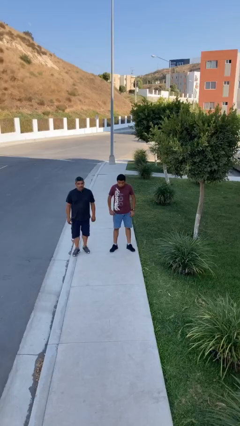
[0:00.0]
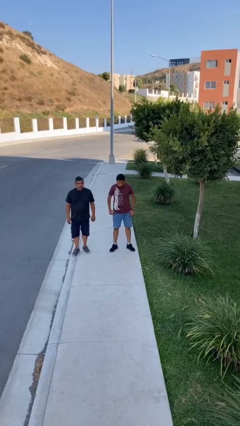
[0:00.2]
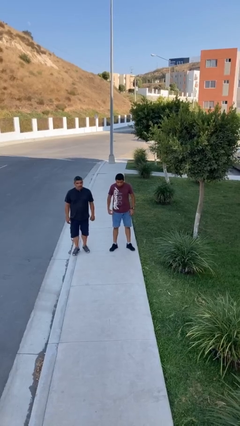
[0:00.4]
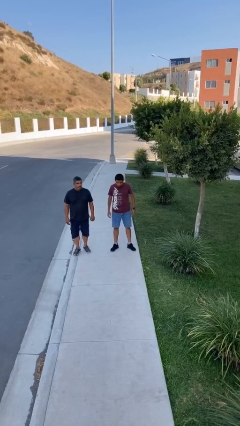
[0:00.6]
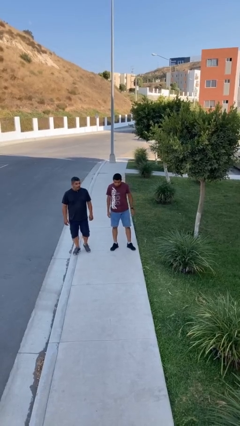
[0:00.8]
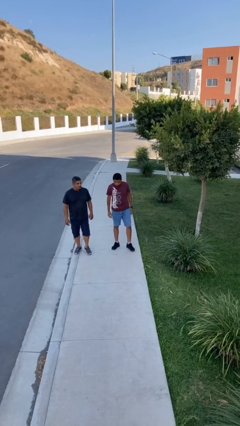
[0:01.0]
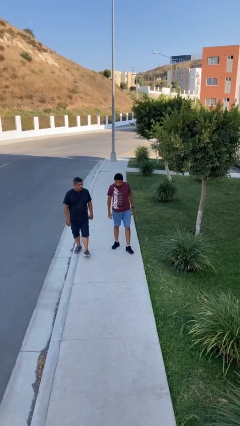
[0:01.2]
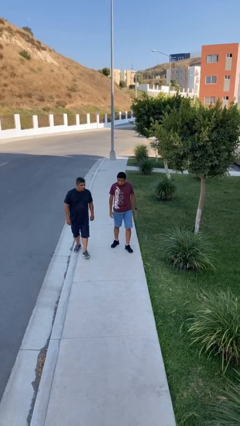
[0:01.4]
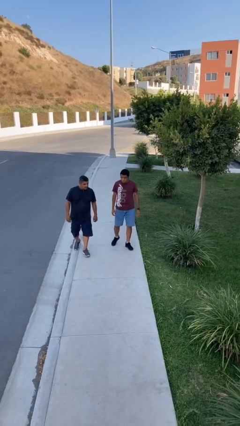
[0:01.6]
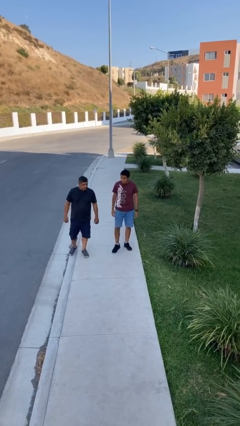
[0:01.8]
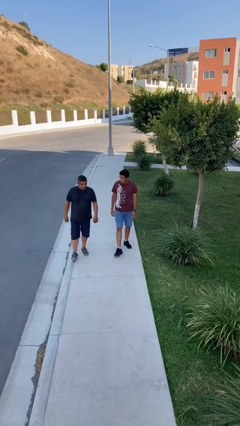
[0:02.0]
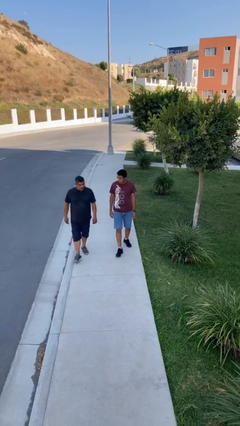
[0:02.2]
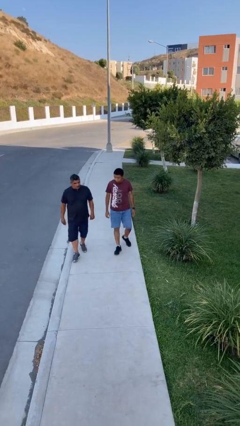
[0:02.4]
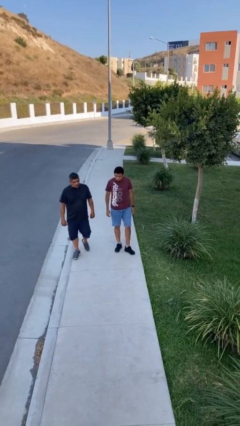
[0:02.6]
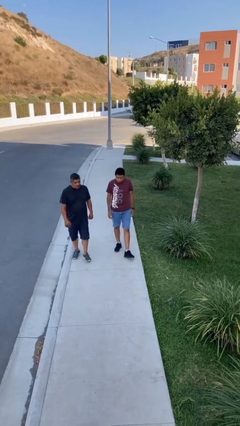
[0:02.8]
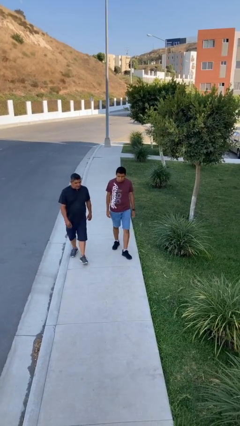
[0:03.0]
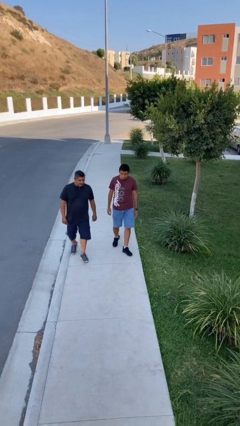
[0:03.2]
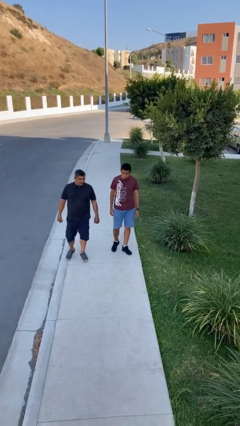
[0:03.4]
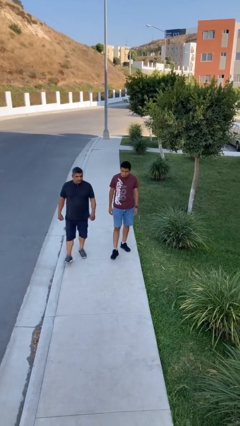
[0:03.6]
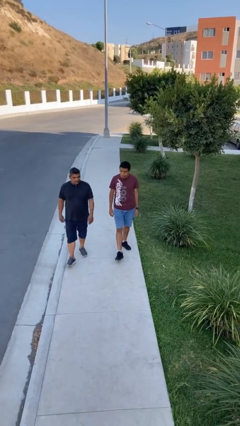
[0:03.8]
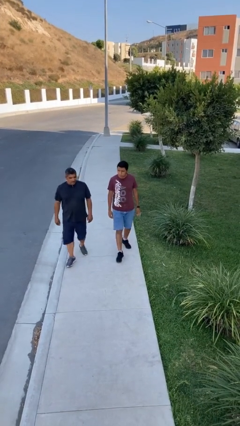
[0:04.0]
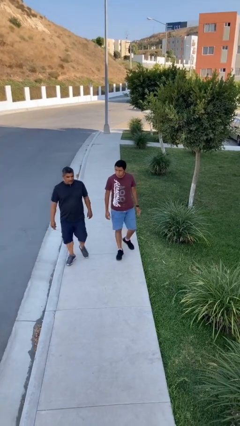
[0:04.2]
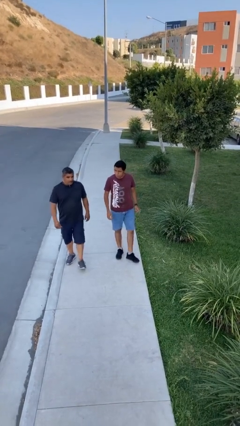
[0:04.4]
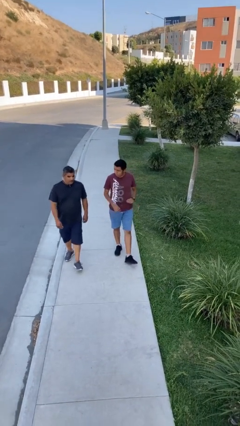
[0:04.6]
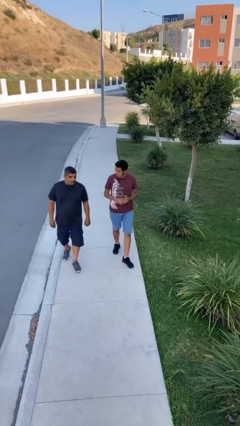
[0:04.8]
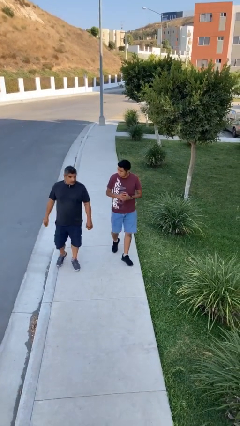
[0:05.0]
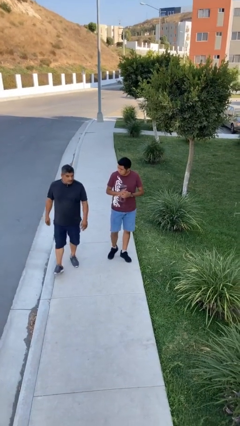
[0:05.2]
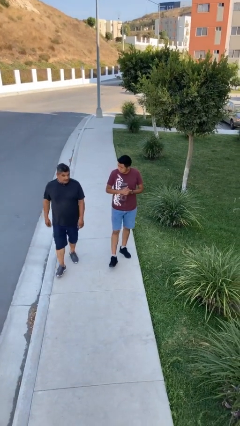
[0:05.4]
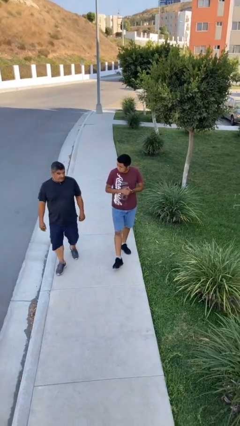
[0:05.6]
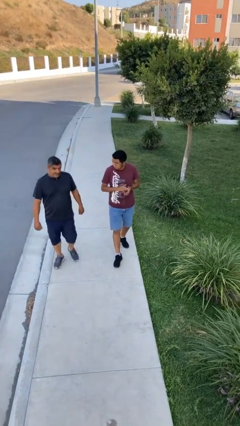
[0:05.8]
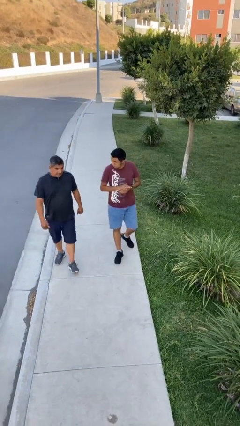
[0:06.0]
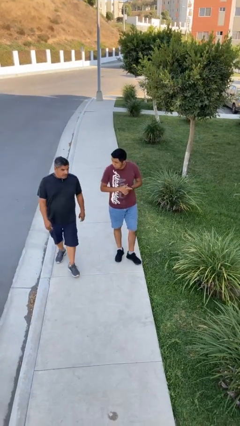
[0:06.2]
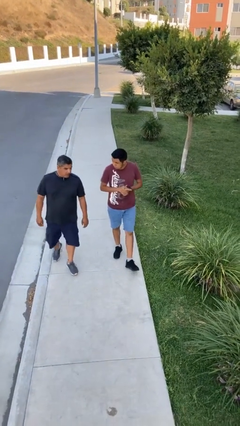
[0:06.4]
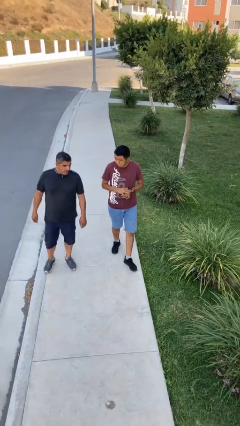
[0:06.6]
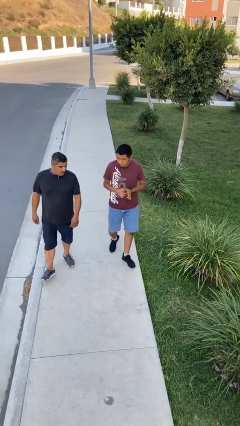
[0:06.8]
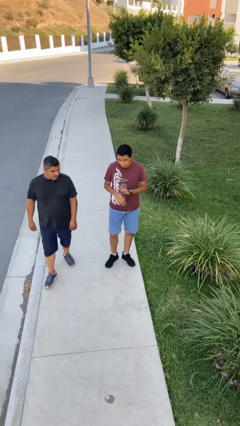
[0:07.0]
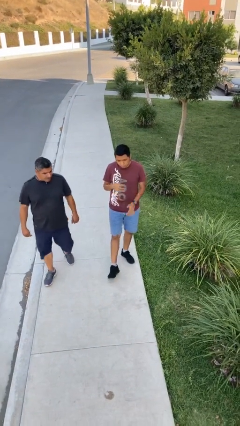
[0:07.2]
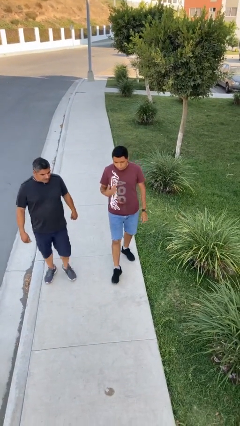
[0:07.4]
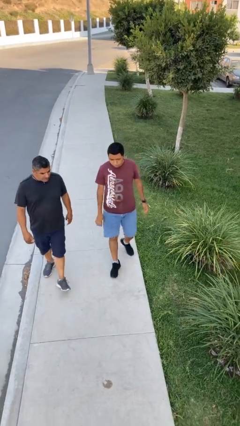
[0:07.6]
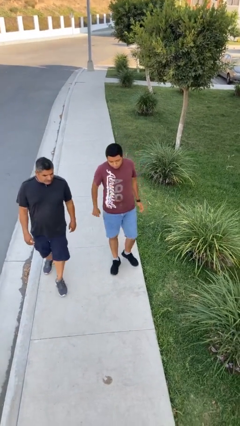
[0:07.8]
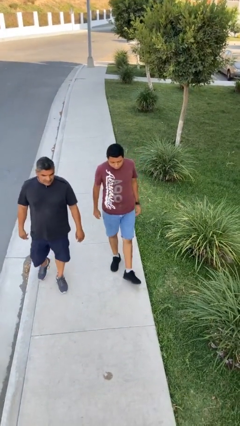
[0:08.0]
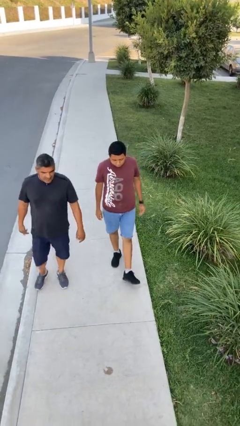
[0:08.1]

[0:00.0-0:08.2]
person talks to person

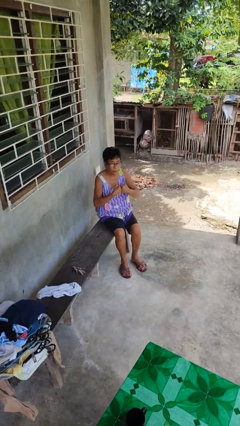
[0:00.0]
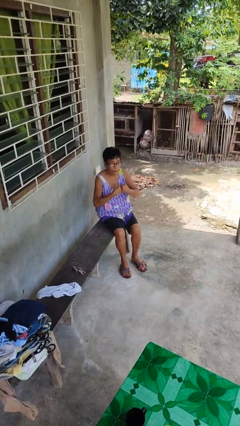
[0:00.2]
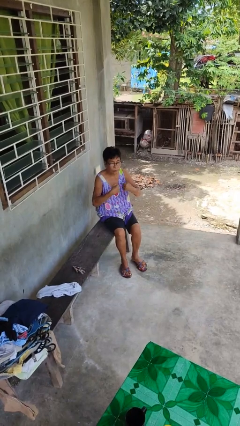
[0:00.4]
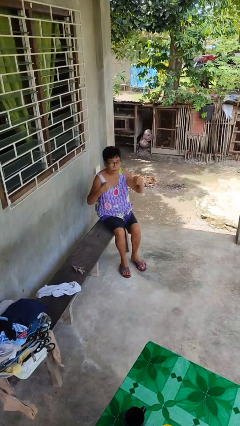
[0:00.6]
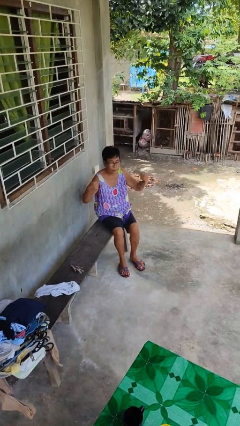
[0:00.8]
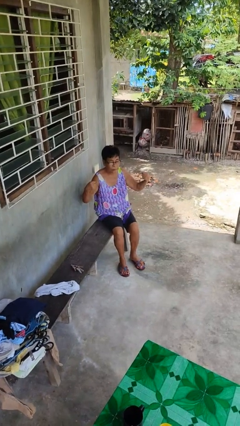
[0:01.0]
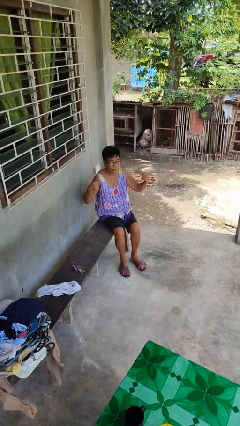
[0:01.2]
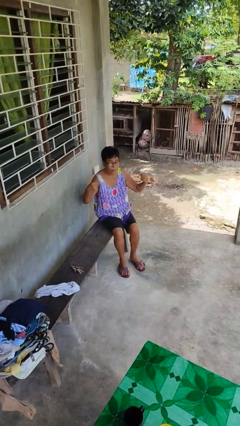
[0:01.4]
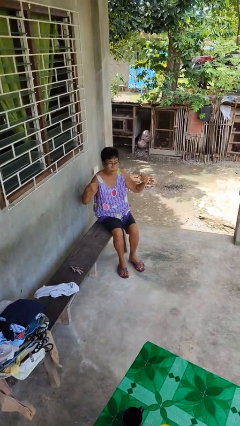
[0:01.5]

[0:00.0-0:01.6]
person gestures zoom in

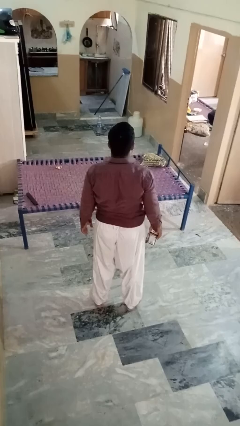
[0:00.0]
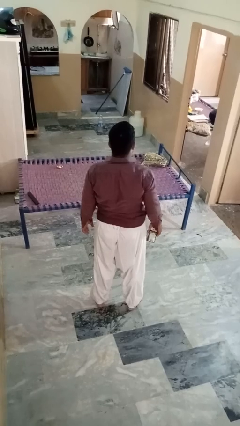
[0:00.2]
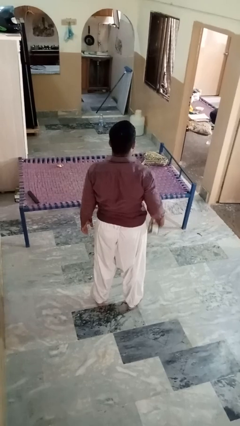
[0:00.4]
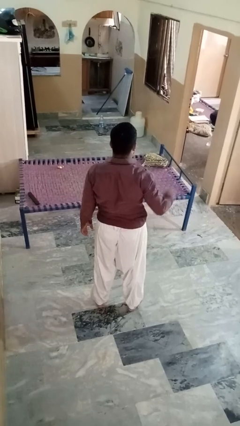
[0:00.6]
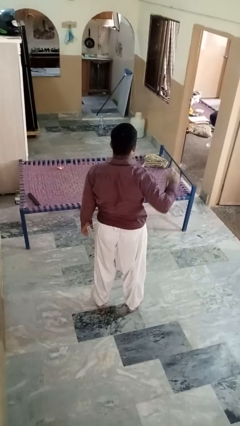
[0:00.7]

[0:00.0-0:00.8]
person drops object

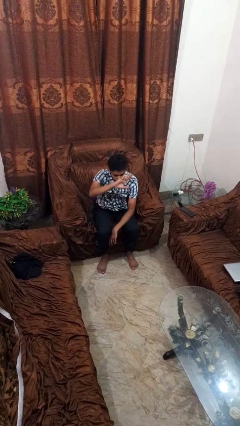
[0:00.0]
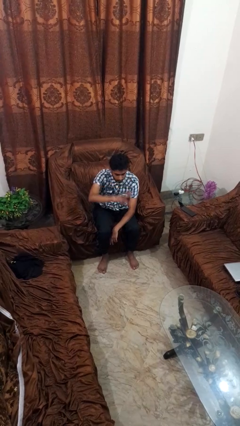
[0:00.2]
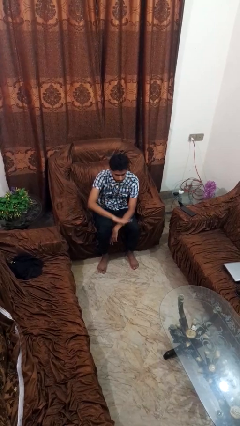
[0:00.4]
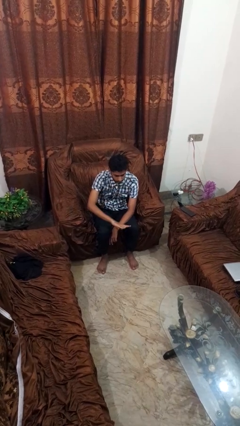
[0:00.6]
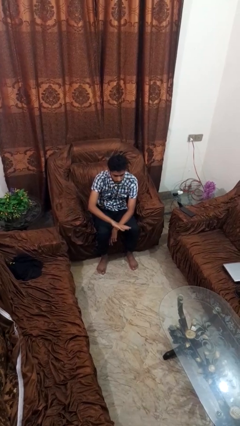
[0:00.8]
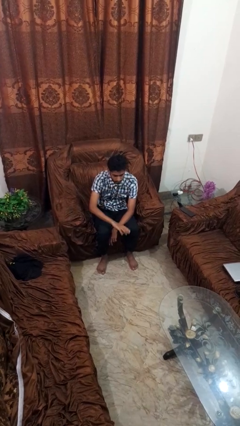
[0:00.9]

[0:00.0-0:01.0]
person gestures swipe down

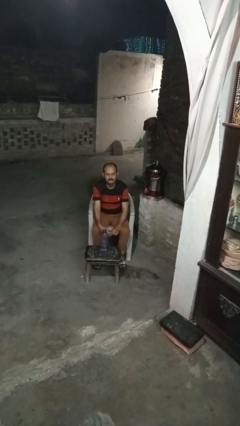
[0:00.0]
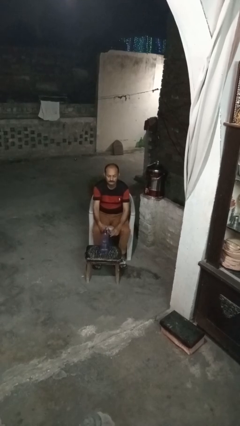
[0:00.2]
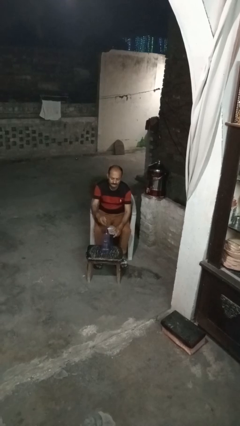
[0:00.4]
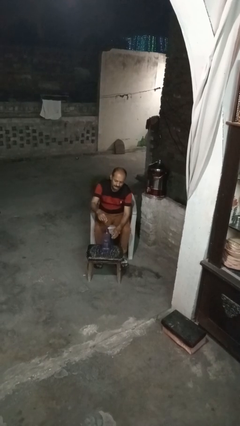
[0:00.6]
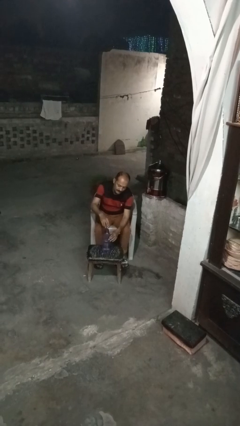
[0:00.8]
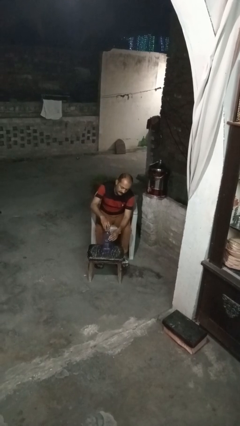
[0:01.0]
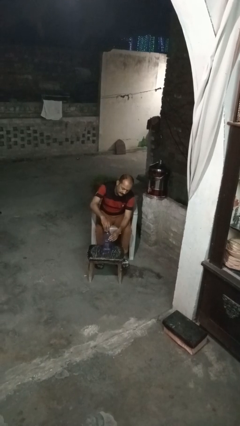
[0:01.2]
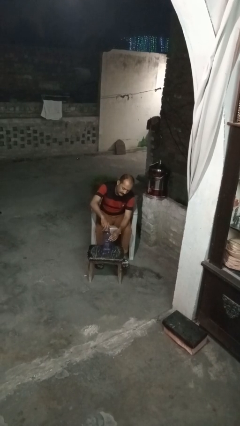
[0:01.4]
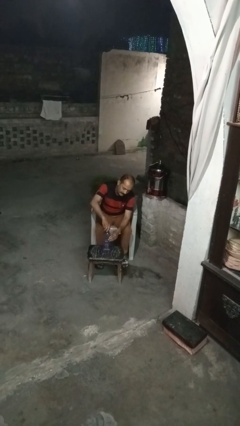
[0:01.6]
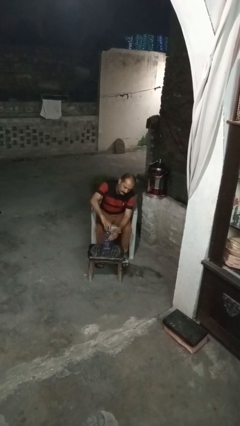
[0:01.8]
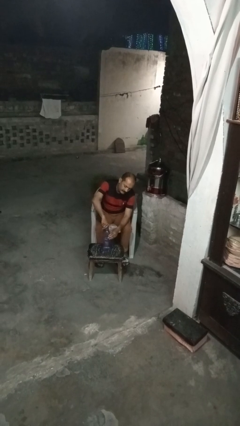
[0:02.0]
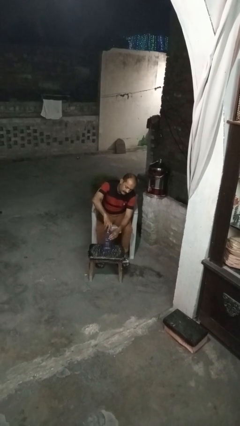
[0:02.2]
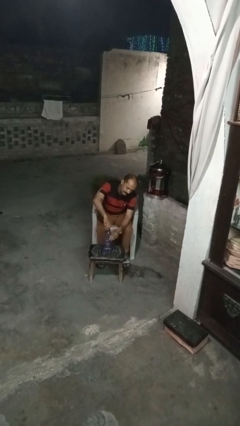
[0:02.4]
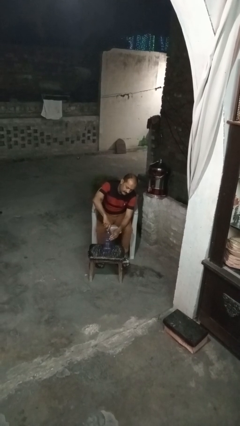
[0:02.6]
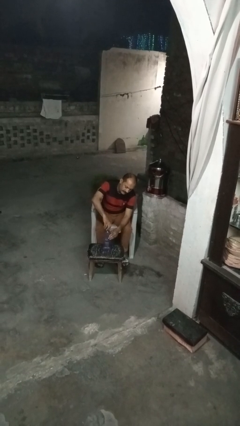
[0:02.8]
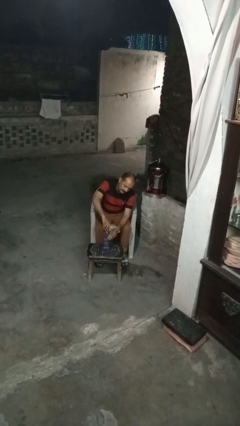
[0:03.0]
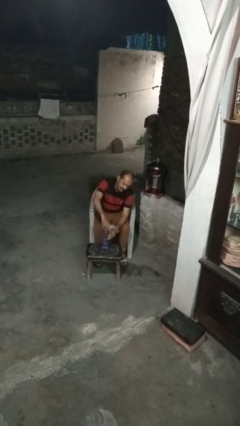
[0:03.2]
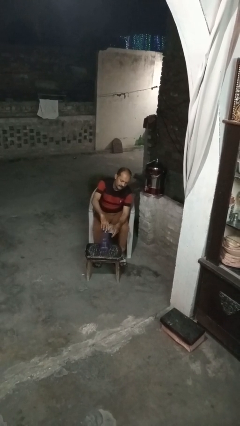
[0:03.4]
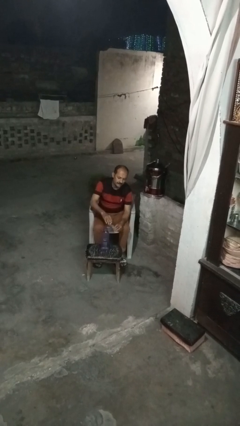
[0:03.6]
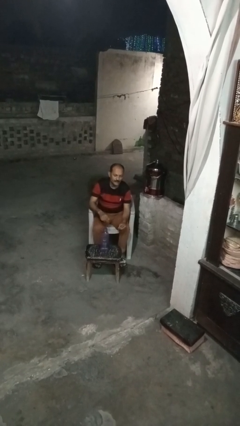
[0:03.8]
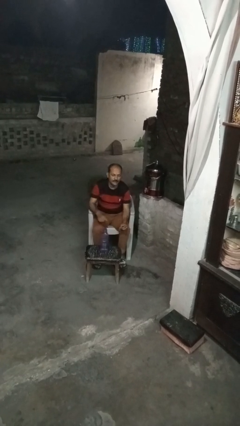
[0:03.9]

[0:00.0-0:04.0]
person screws lid to bottle

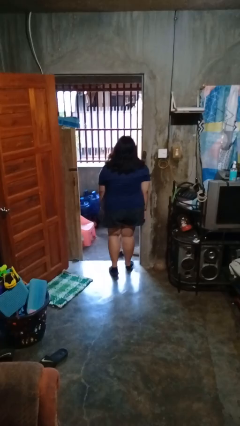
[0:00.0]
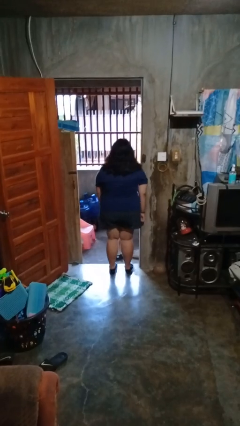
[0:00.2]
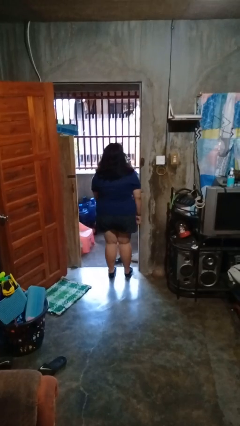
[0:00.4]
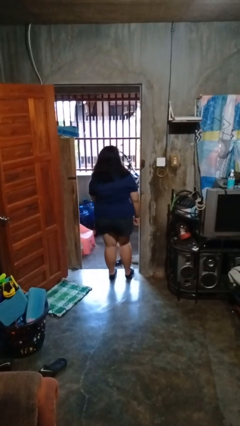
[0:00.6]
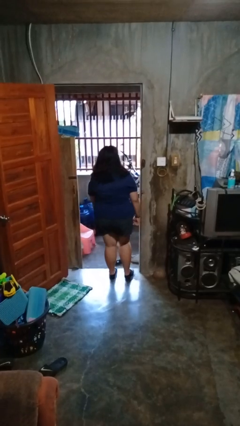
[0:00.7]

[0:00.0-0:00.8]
person bumps into wall

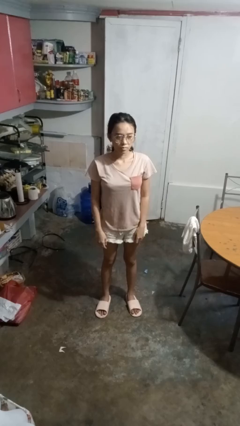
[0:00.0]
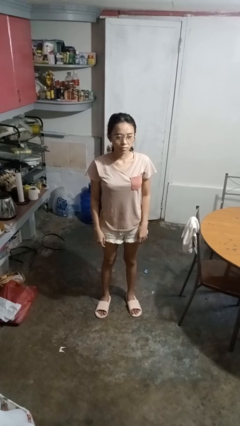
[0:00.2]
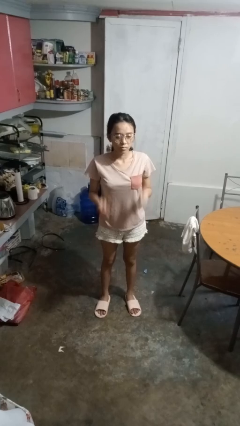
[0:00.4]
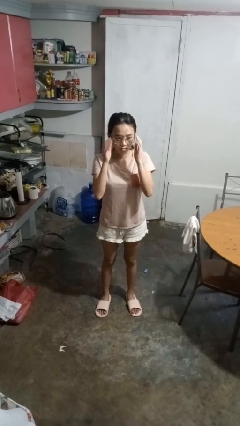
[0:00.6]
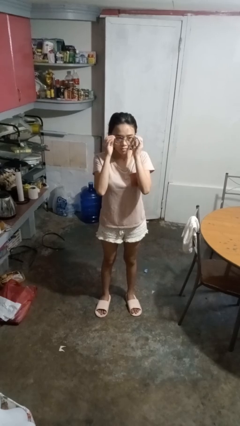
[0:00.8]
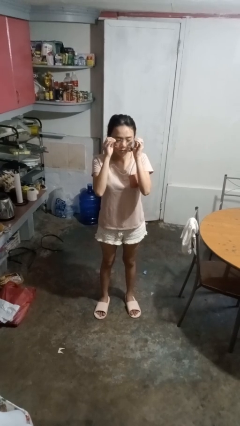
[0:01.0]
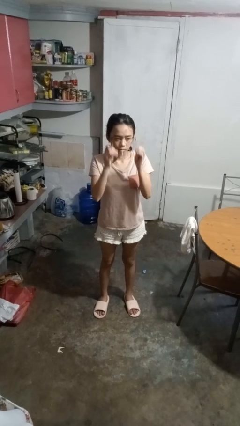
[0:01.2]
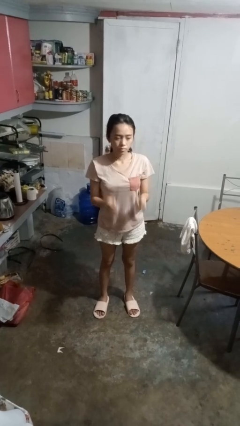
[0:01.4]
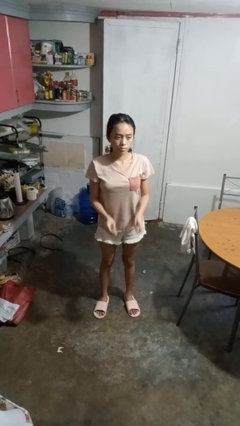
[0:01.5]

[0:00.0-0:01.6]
person takes off glasses
